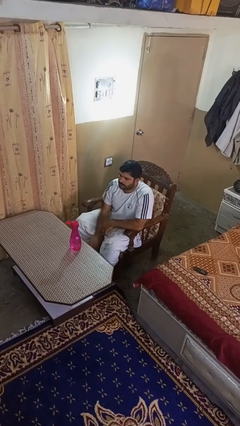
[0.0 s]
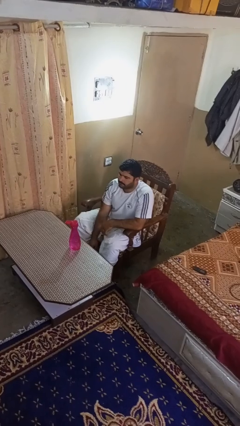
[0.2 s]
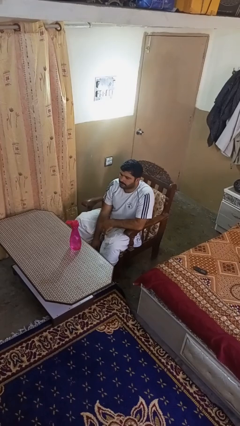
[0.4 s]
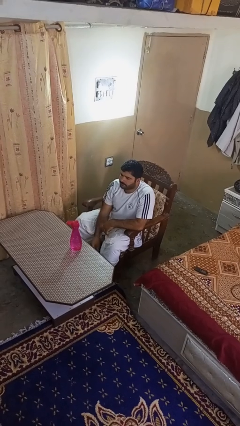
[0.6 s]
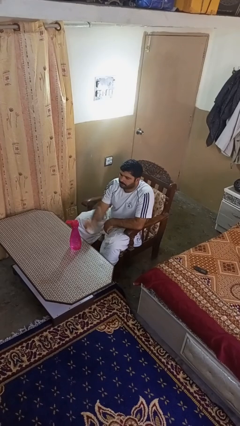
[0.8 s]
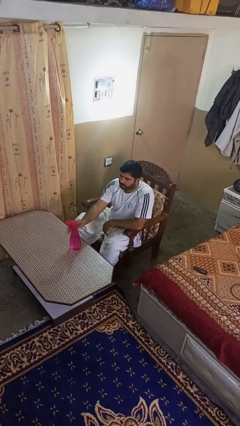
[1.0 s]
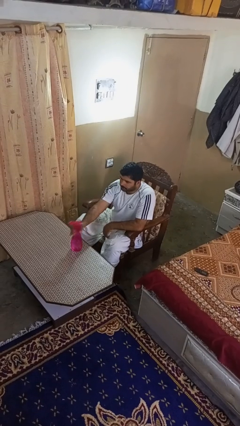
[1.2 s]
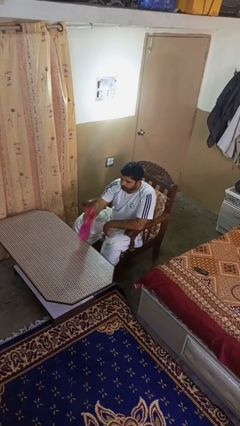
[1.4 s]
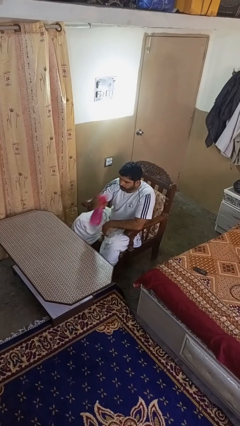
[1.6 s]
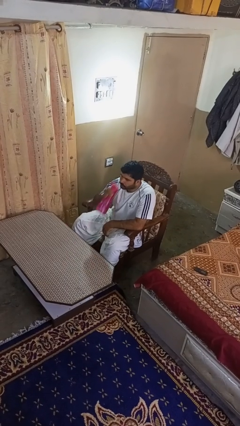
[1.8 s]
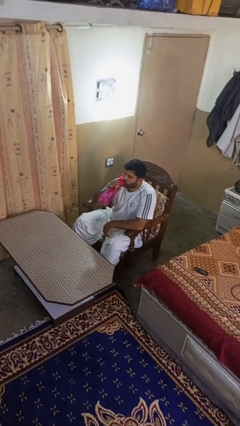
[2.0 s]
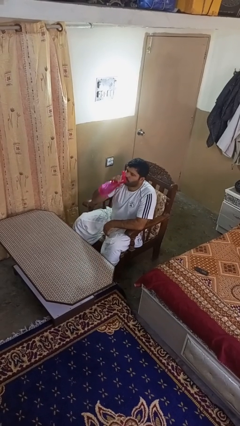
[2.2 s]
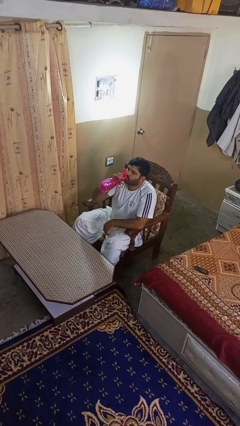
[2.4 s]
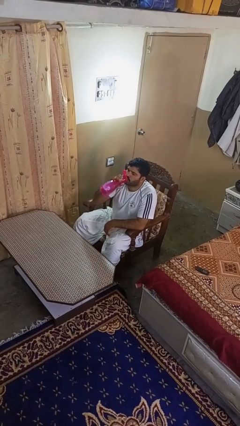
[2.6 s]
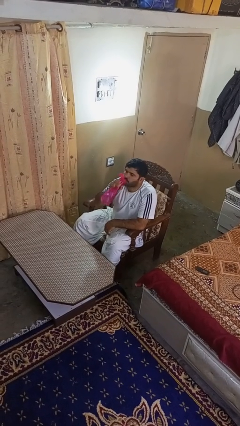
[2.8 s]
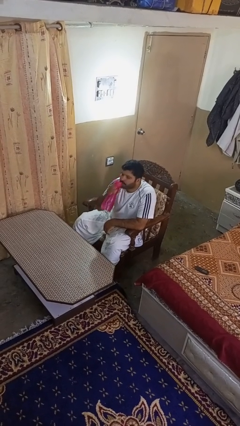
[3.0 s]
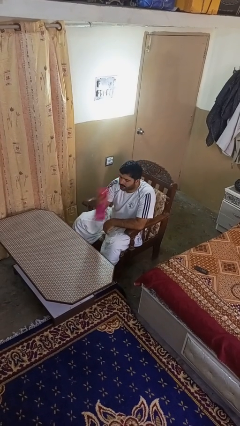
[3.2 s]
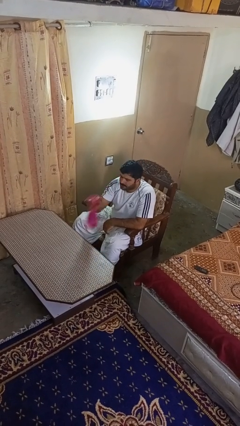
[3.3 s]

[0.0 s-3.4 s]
person drinks from bottle

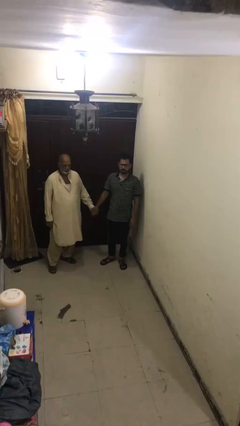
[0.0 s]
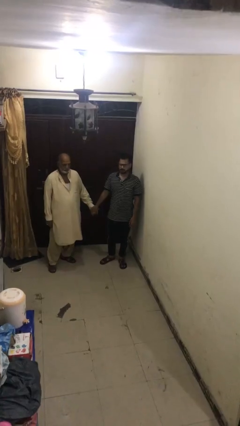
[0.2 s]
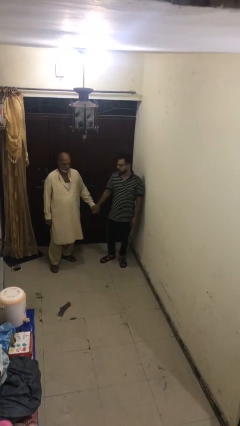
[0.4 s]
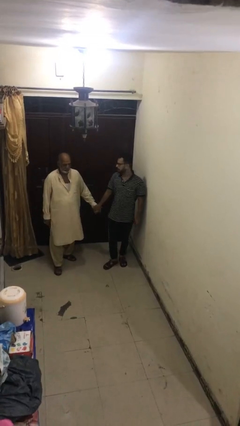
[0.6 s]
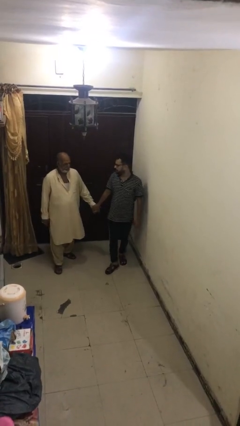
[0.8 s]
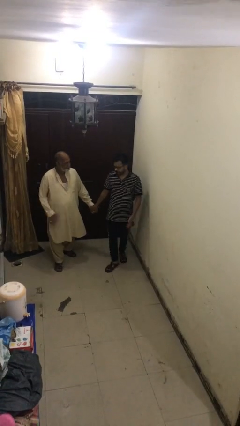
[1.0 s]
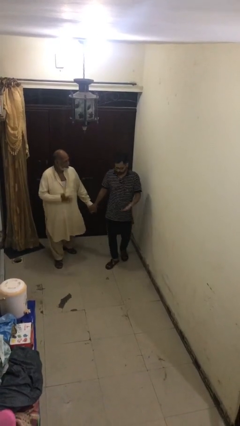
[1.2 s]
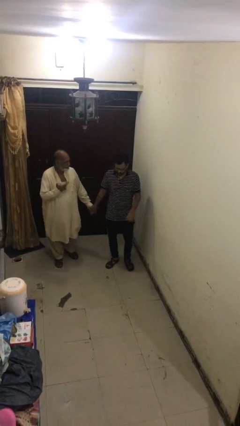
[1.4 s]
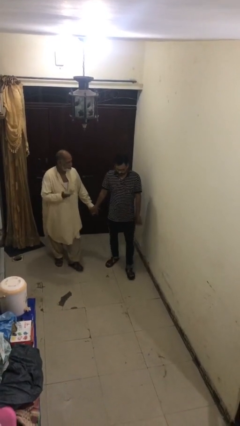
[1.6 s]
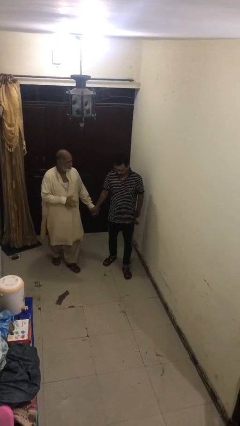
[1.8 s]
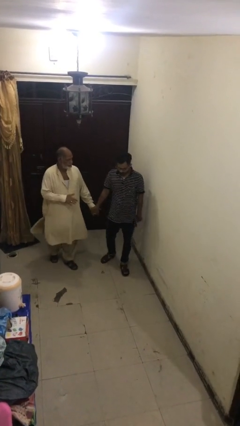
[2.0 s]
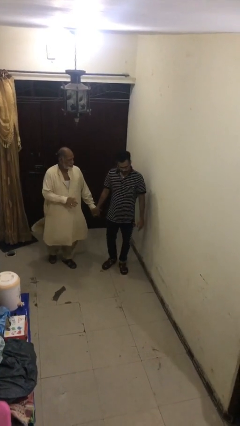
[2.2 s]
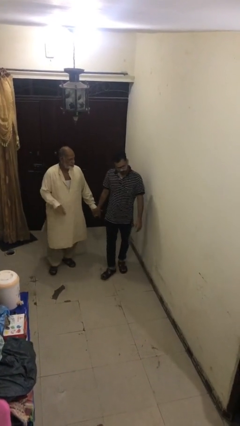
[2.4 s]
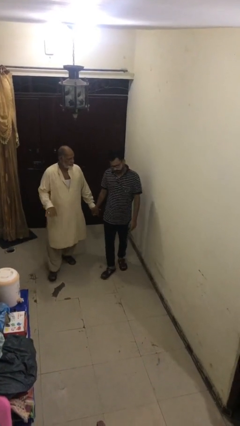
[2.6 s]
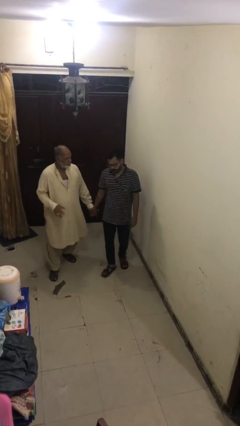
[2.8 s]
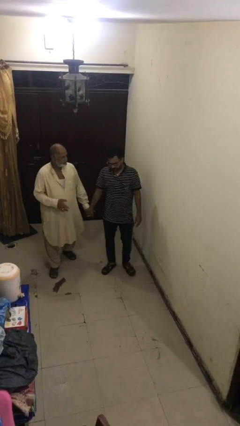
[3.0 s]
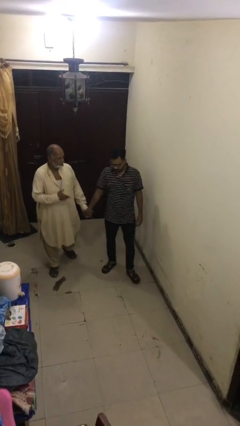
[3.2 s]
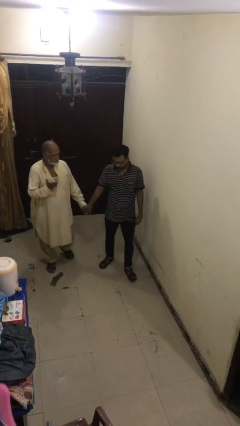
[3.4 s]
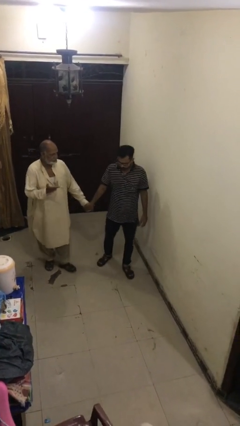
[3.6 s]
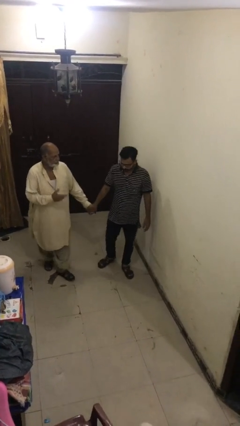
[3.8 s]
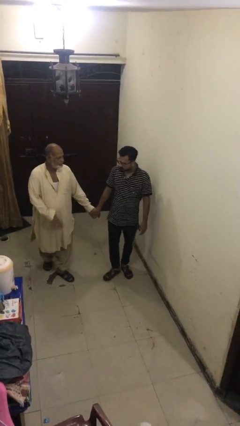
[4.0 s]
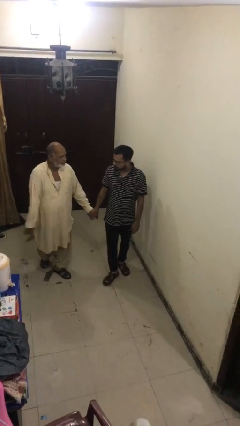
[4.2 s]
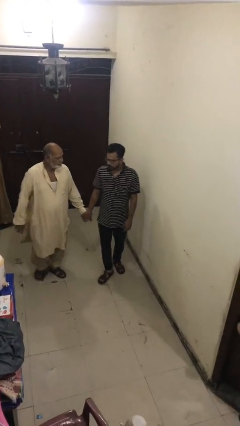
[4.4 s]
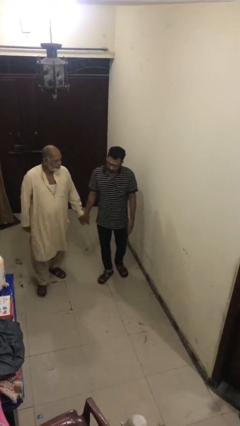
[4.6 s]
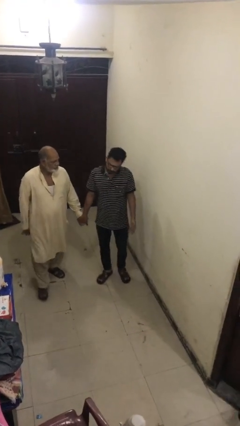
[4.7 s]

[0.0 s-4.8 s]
person holds hand

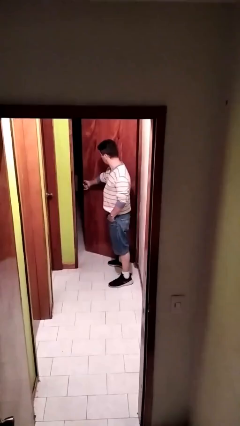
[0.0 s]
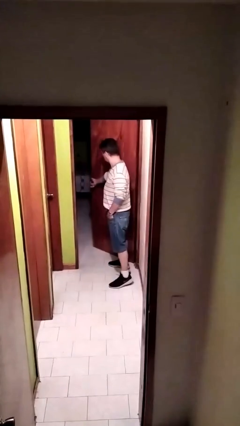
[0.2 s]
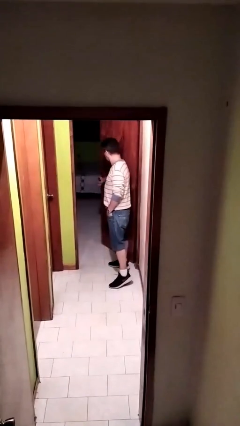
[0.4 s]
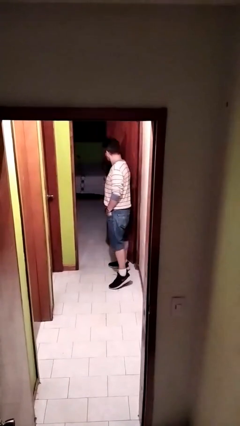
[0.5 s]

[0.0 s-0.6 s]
person opens facility door

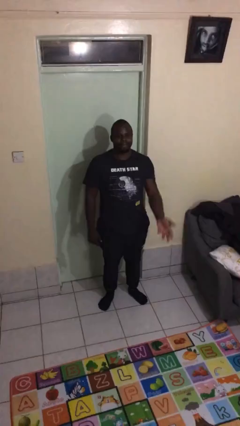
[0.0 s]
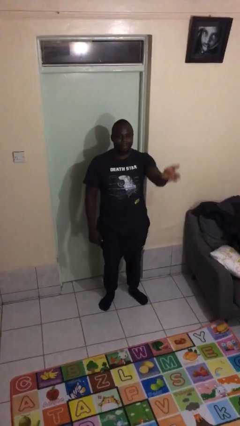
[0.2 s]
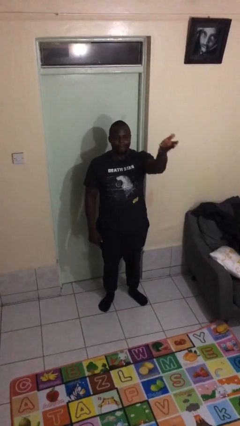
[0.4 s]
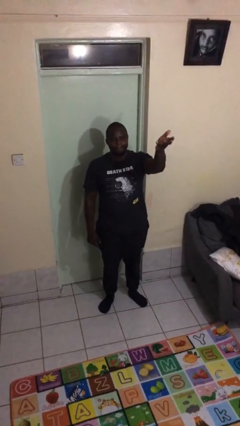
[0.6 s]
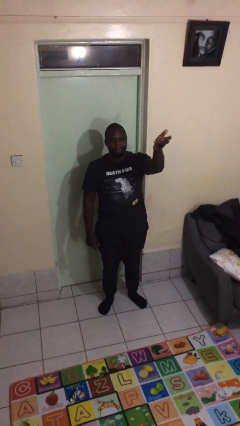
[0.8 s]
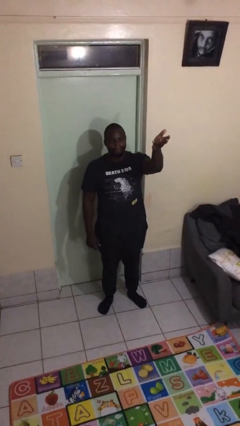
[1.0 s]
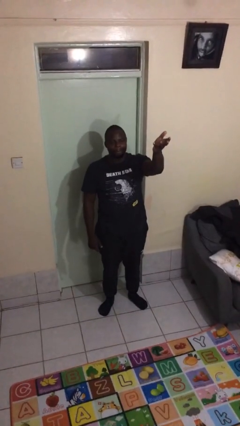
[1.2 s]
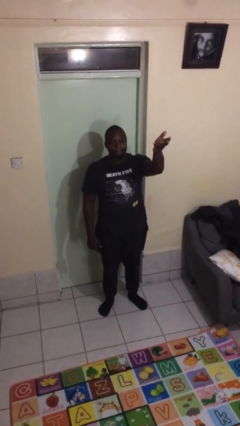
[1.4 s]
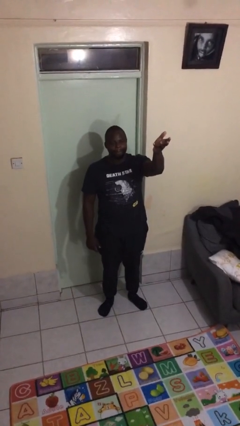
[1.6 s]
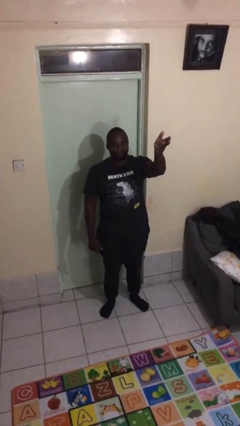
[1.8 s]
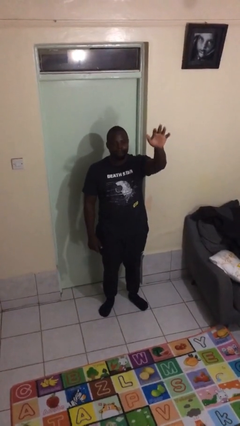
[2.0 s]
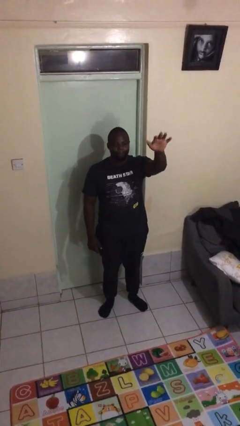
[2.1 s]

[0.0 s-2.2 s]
person gestures swipe up

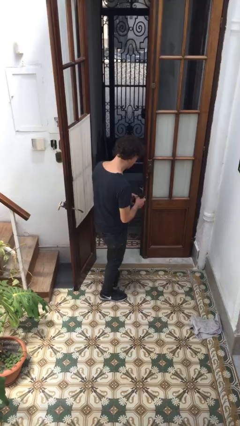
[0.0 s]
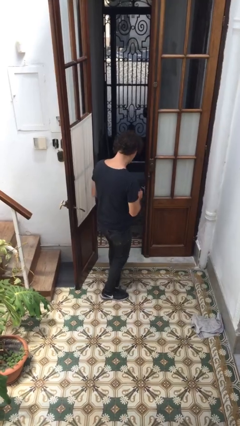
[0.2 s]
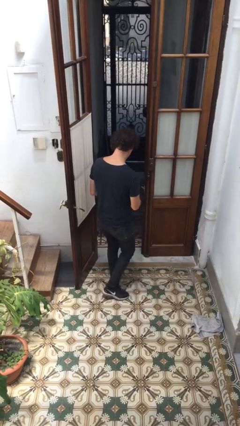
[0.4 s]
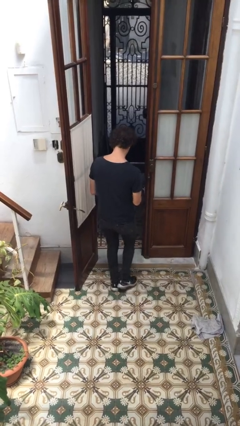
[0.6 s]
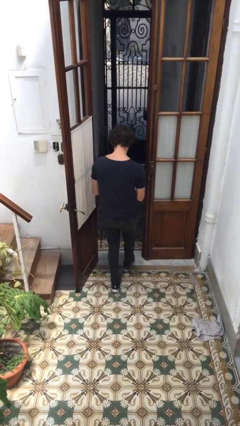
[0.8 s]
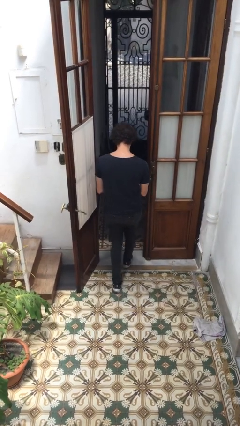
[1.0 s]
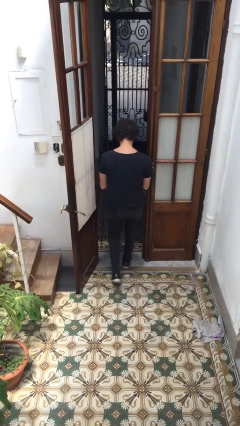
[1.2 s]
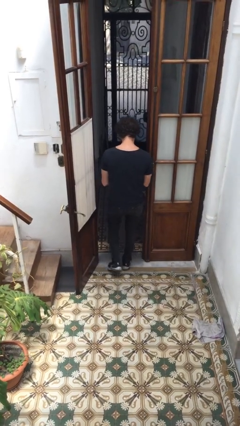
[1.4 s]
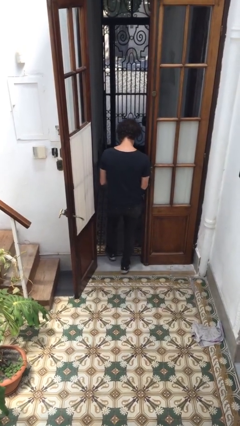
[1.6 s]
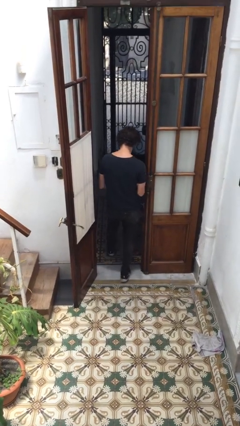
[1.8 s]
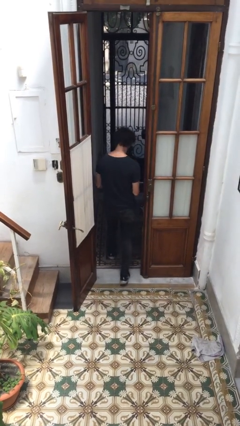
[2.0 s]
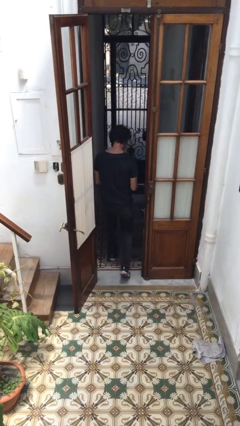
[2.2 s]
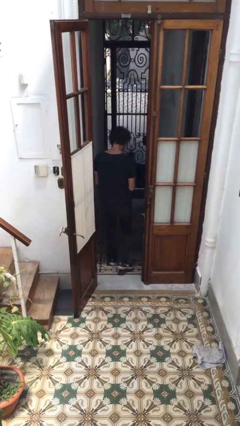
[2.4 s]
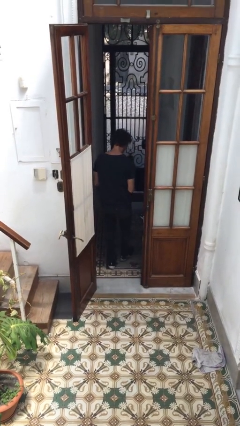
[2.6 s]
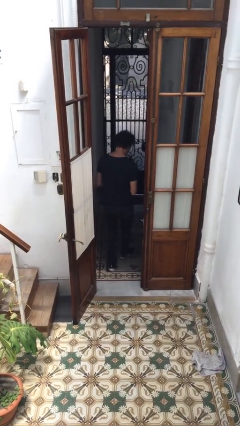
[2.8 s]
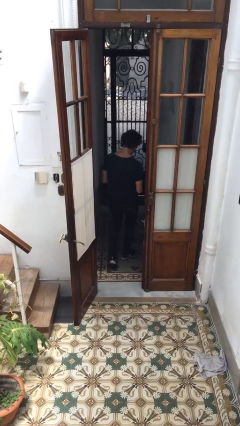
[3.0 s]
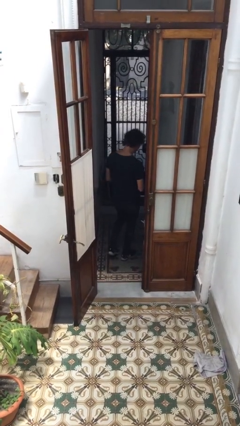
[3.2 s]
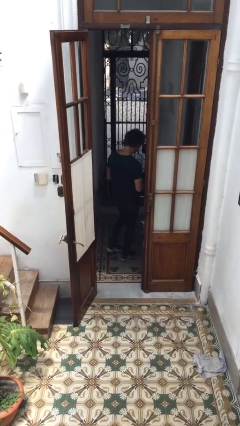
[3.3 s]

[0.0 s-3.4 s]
person exits scene through structure

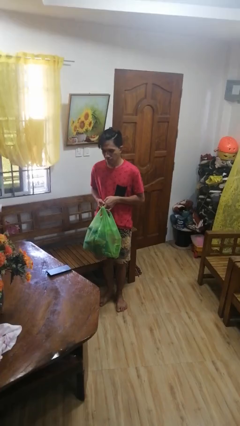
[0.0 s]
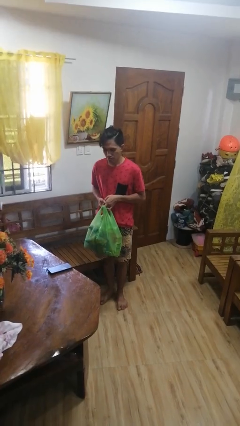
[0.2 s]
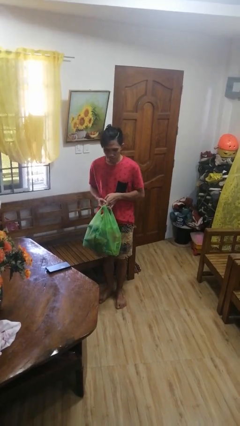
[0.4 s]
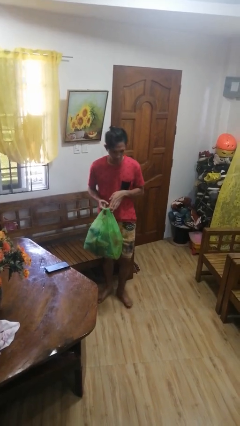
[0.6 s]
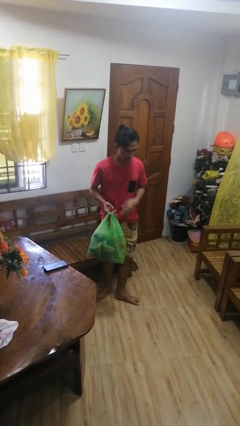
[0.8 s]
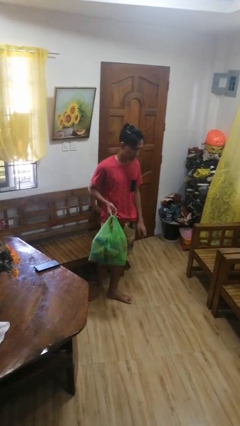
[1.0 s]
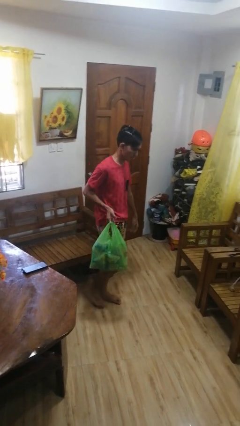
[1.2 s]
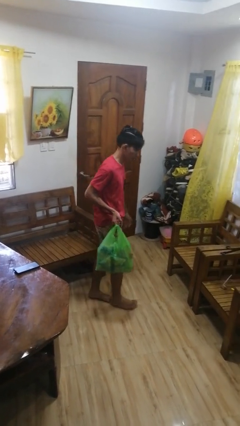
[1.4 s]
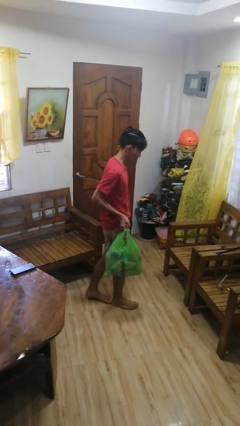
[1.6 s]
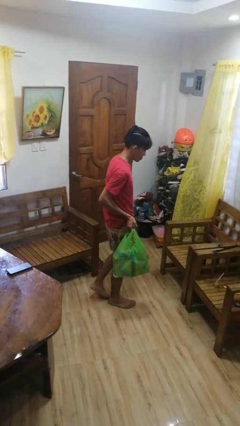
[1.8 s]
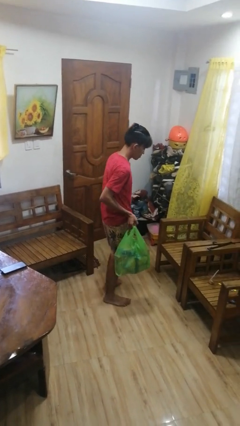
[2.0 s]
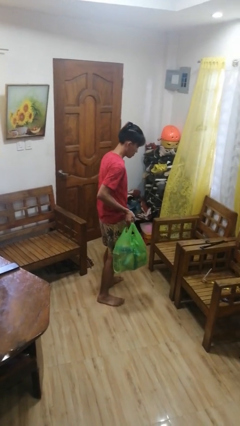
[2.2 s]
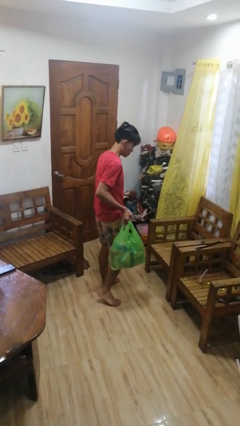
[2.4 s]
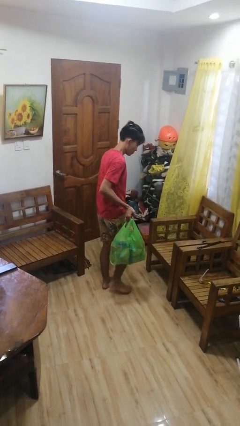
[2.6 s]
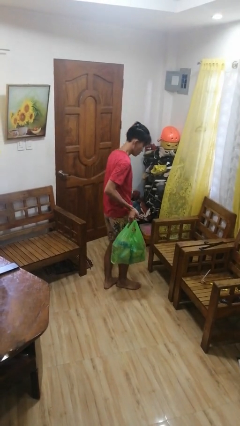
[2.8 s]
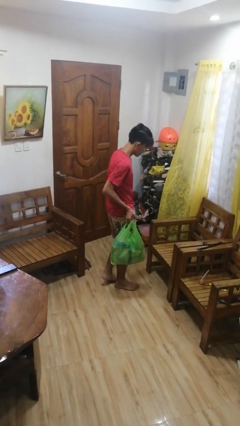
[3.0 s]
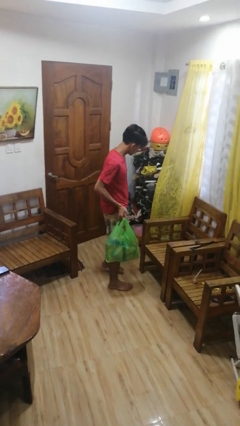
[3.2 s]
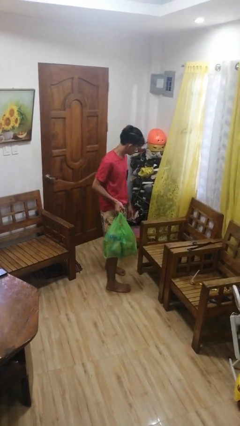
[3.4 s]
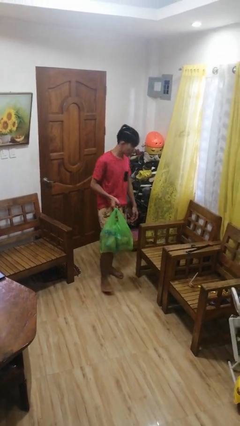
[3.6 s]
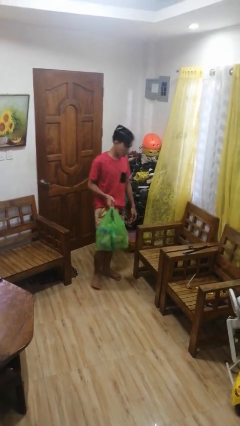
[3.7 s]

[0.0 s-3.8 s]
person carries groceries
